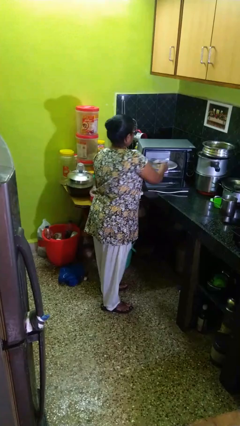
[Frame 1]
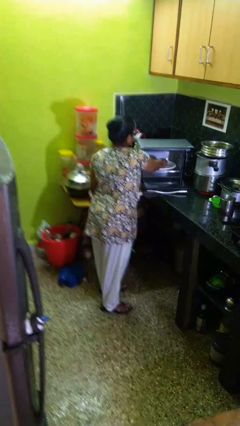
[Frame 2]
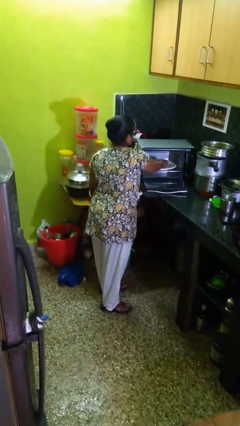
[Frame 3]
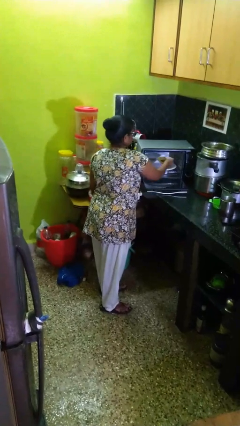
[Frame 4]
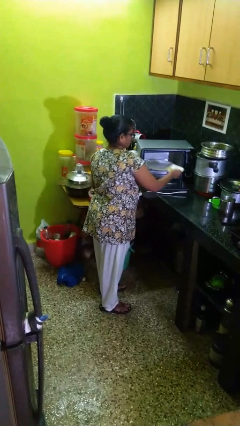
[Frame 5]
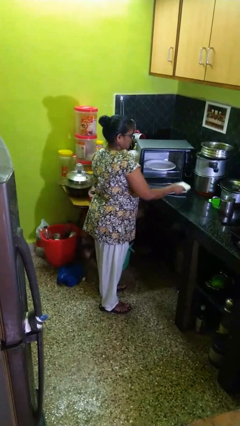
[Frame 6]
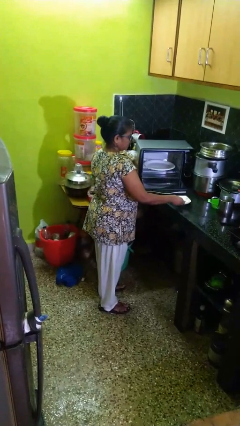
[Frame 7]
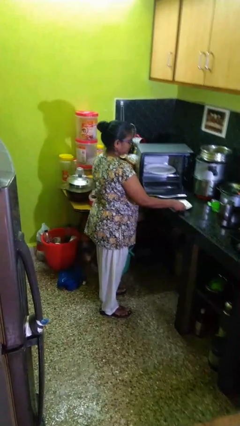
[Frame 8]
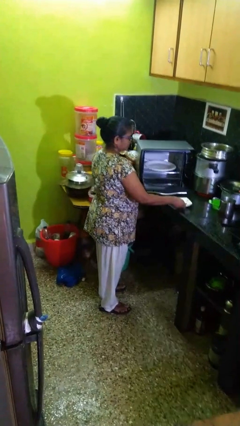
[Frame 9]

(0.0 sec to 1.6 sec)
person takes object from microwave

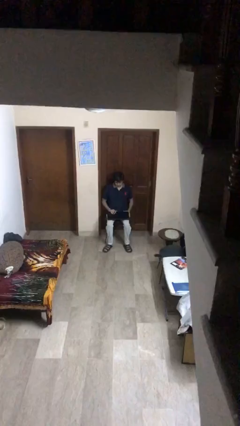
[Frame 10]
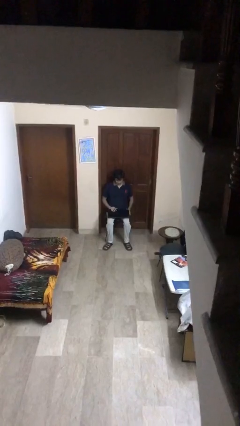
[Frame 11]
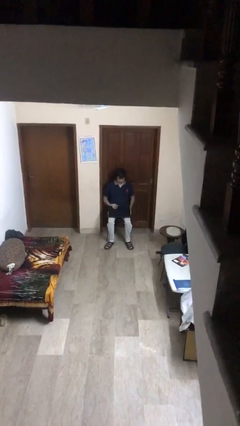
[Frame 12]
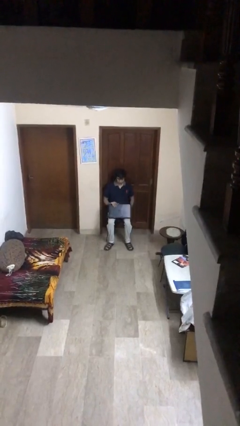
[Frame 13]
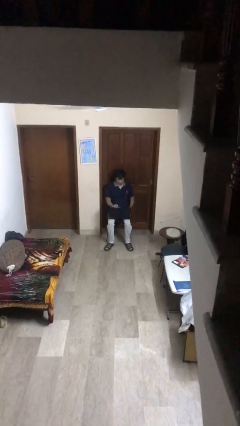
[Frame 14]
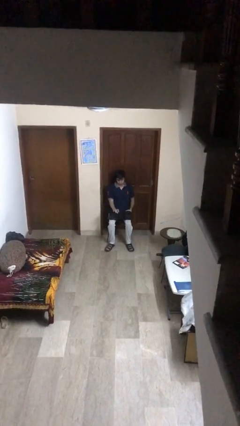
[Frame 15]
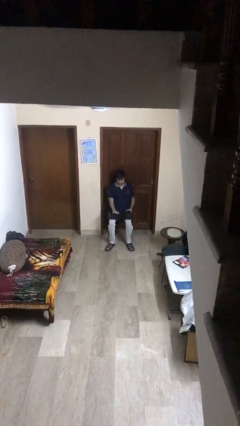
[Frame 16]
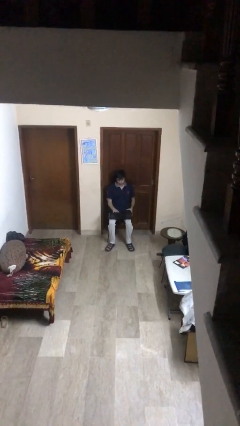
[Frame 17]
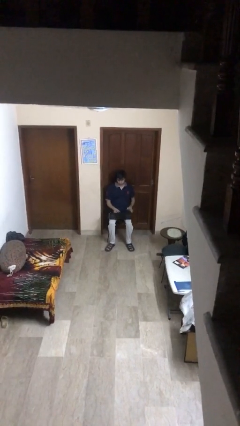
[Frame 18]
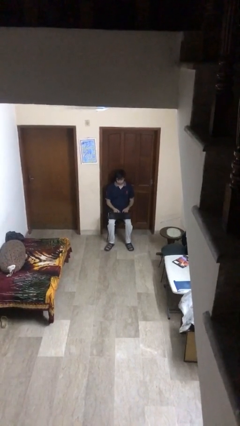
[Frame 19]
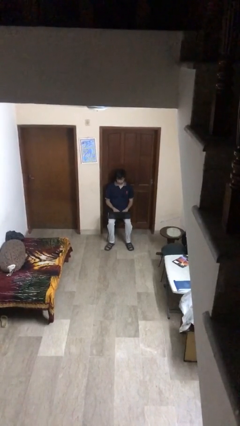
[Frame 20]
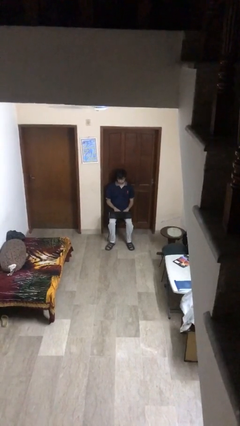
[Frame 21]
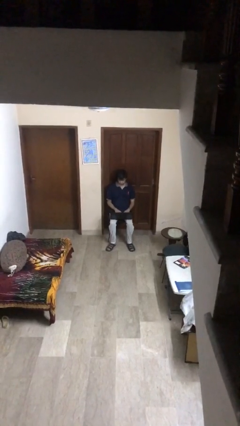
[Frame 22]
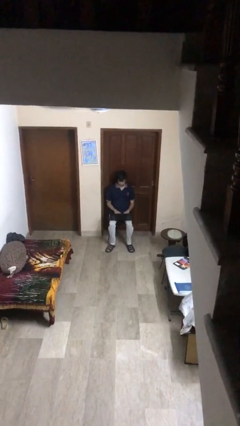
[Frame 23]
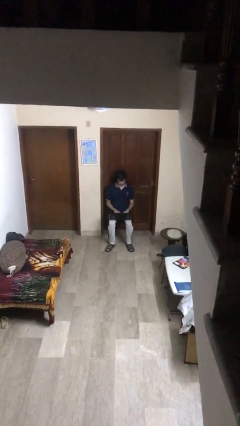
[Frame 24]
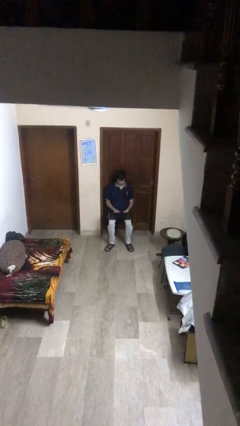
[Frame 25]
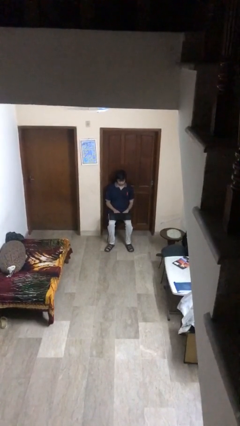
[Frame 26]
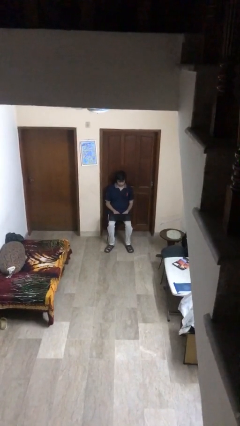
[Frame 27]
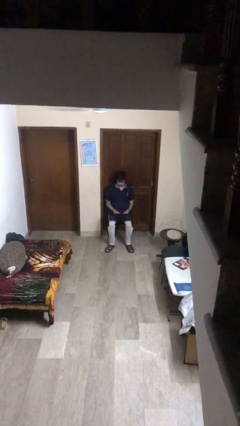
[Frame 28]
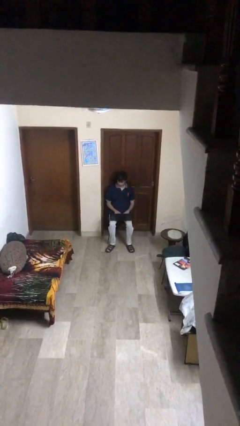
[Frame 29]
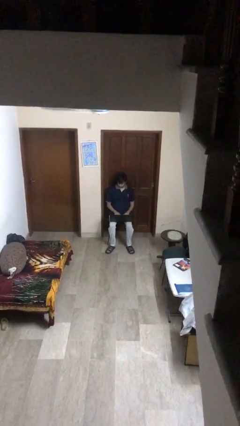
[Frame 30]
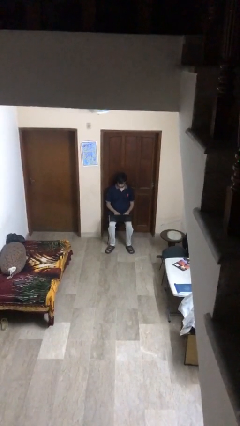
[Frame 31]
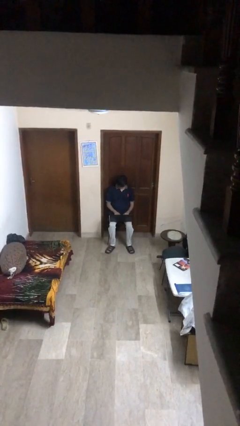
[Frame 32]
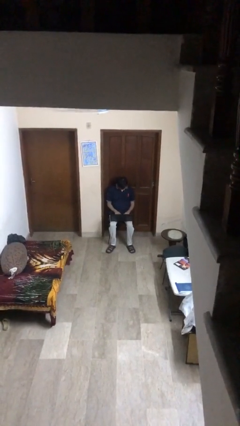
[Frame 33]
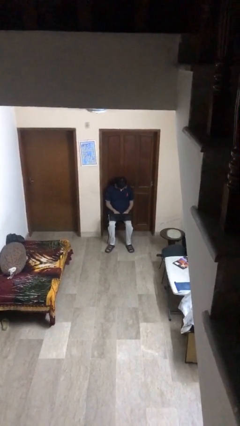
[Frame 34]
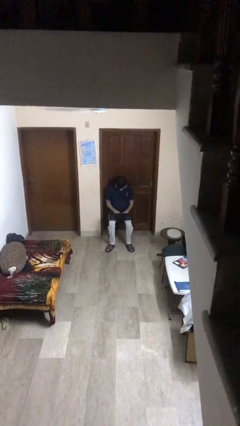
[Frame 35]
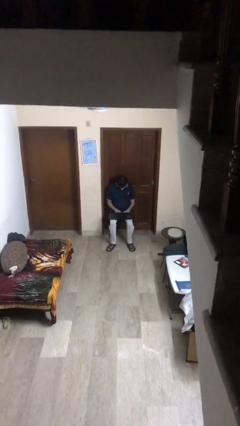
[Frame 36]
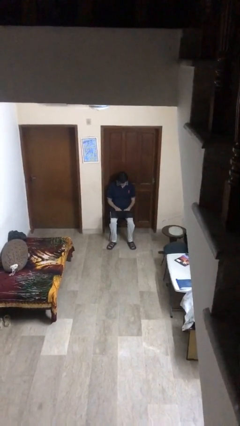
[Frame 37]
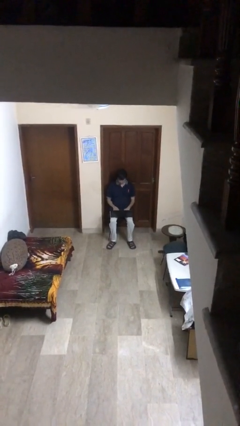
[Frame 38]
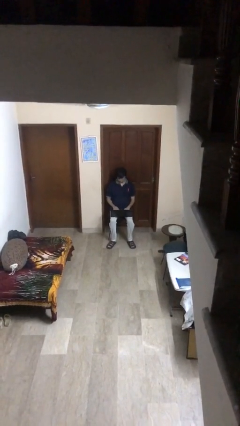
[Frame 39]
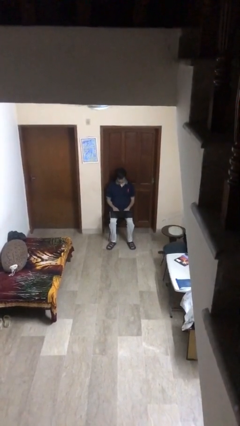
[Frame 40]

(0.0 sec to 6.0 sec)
person interacts with laptop

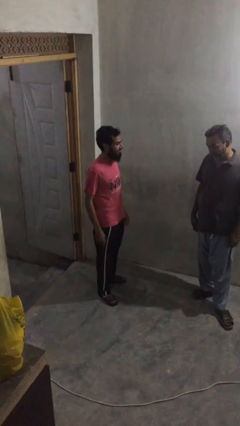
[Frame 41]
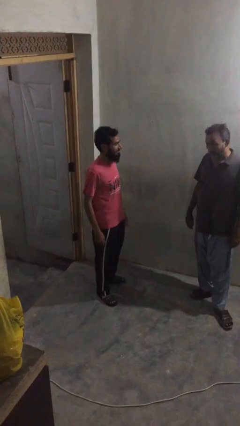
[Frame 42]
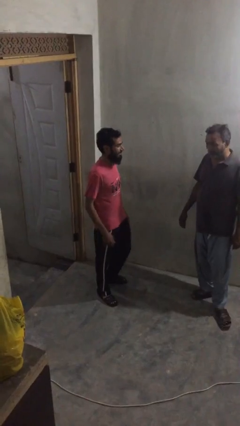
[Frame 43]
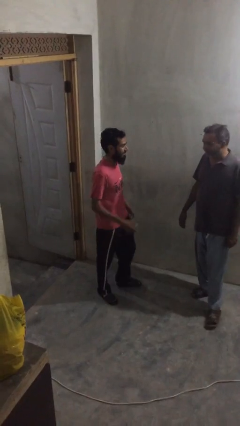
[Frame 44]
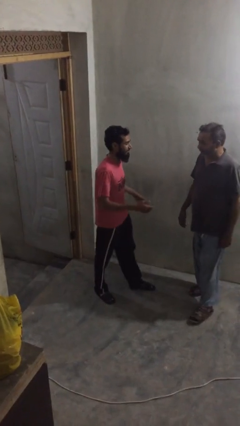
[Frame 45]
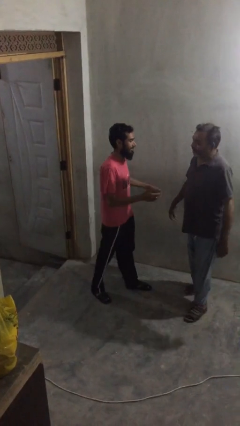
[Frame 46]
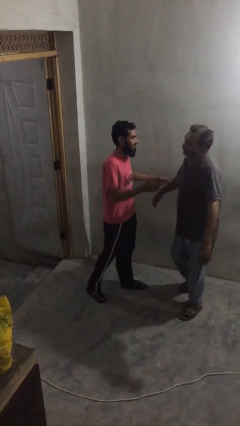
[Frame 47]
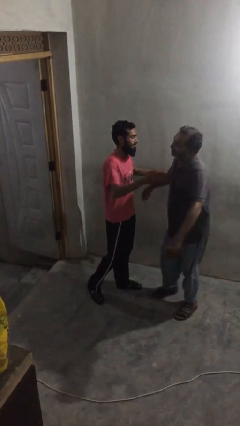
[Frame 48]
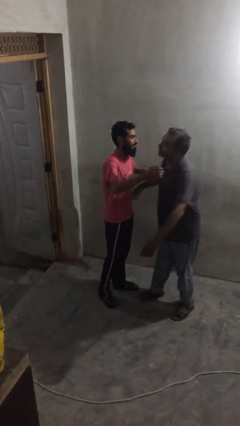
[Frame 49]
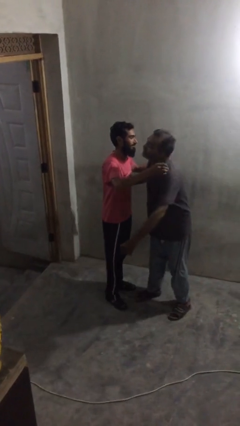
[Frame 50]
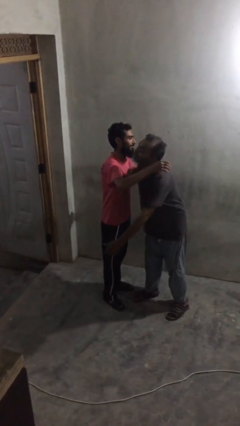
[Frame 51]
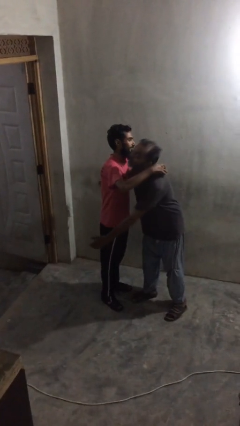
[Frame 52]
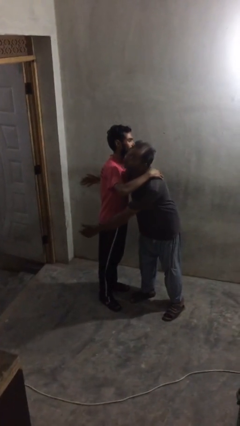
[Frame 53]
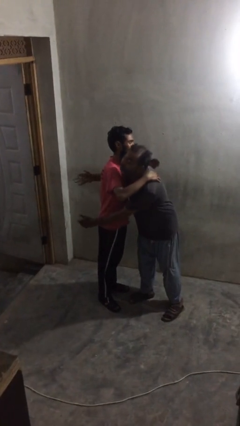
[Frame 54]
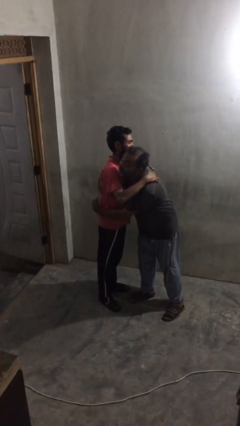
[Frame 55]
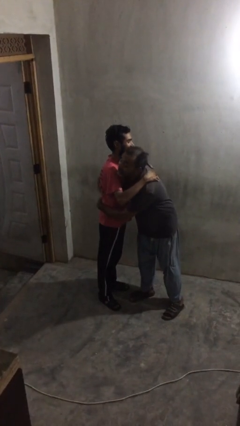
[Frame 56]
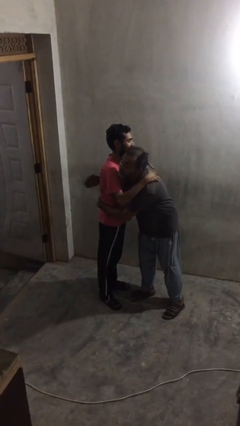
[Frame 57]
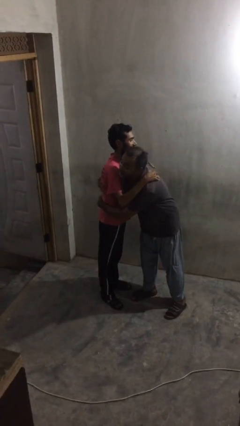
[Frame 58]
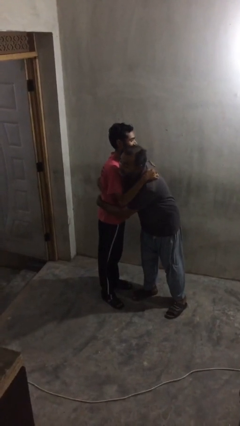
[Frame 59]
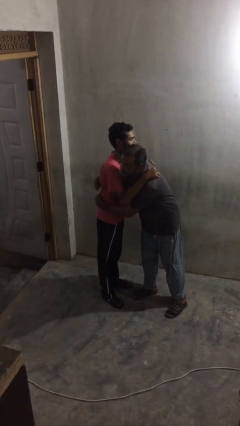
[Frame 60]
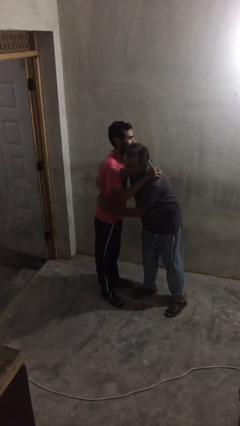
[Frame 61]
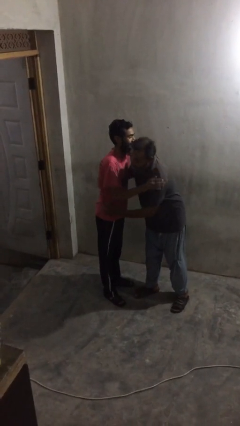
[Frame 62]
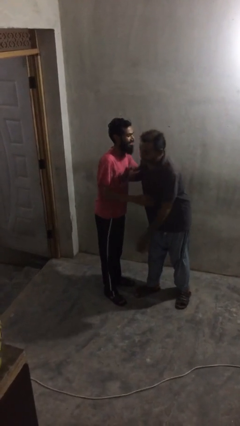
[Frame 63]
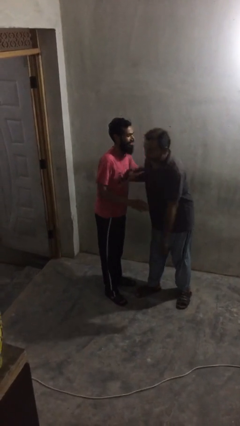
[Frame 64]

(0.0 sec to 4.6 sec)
person embraces person

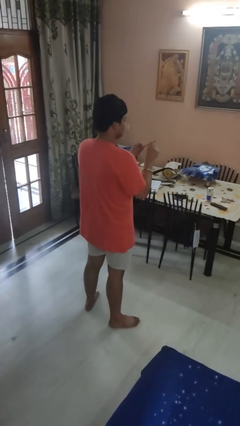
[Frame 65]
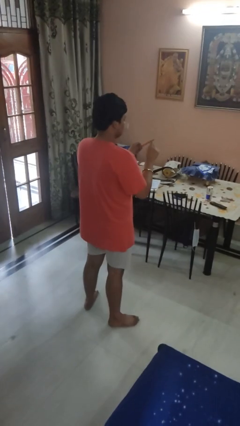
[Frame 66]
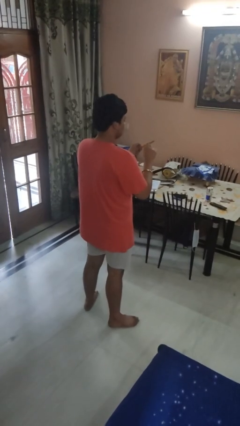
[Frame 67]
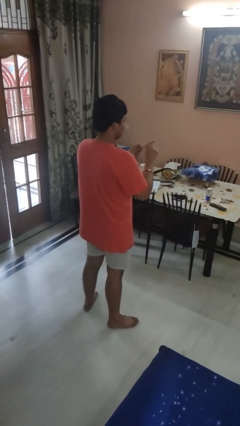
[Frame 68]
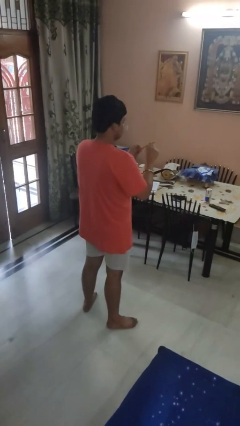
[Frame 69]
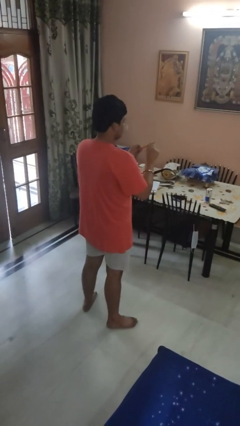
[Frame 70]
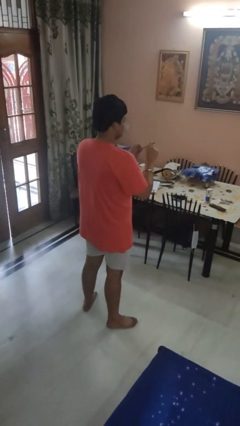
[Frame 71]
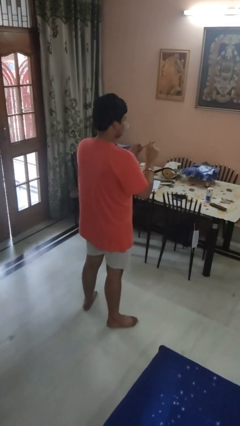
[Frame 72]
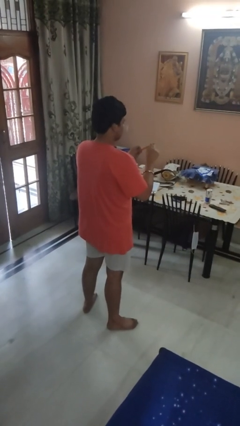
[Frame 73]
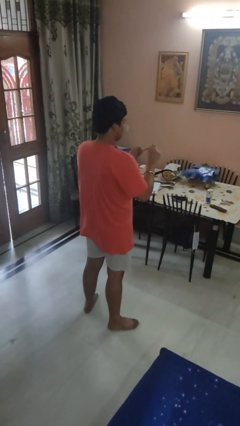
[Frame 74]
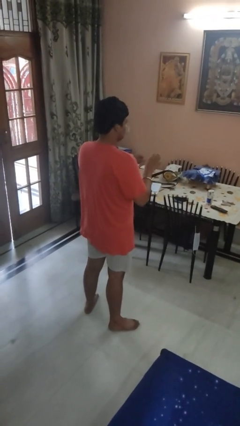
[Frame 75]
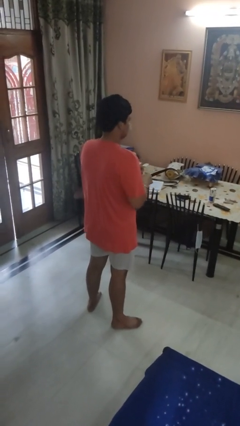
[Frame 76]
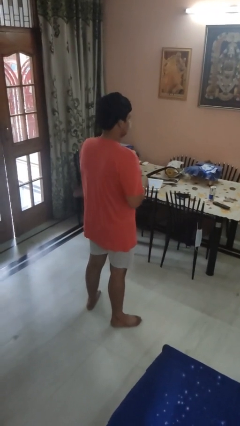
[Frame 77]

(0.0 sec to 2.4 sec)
person files fingernails

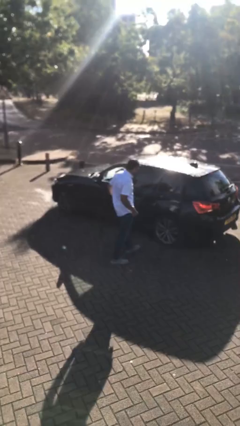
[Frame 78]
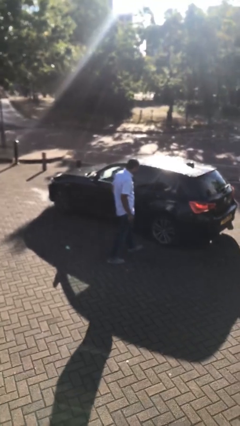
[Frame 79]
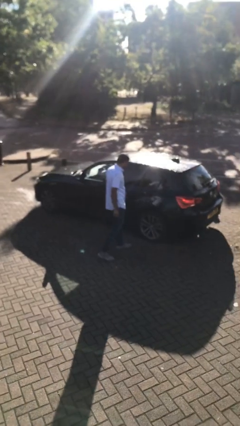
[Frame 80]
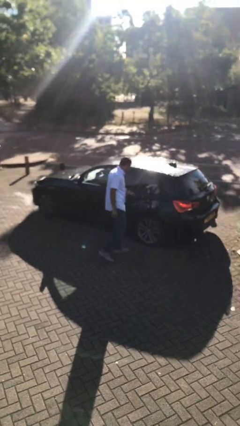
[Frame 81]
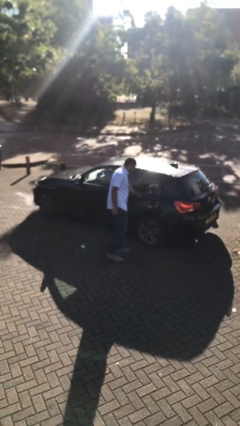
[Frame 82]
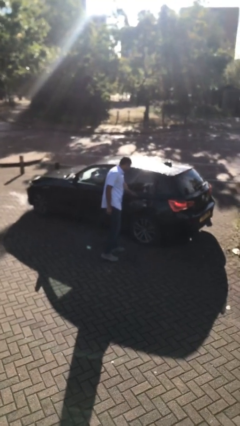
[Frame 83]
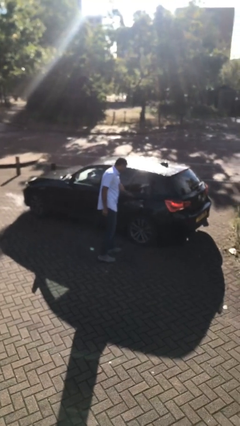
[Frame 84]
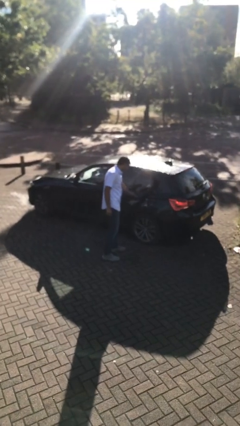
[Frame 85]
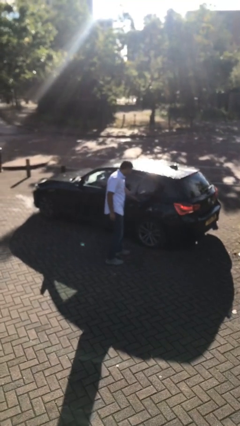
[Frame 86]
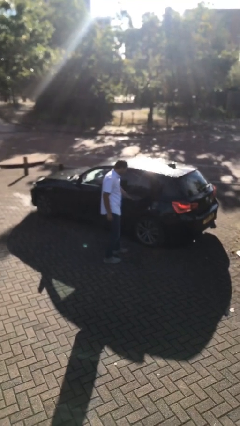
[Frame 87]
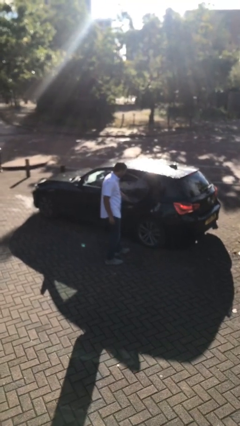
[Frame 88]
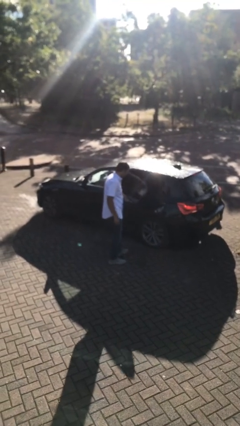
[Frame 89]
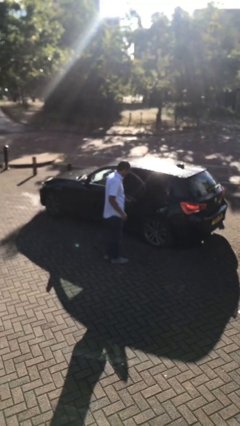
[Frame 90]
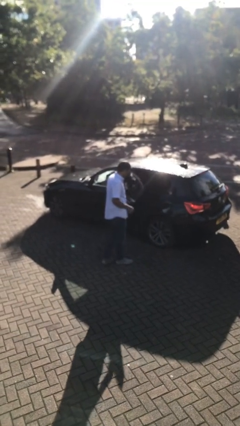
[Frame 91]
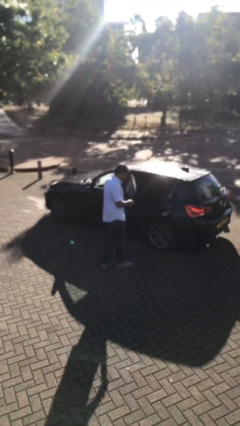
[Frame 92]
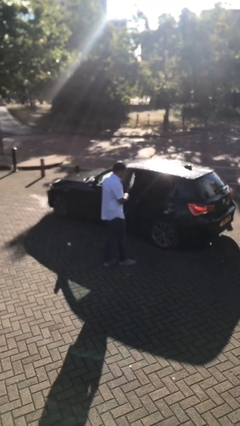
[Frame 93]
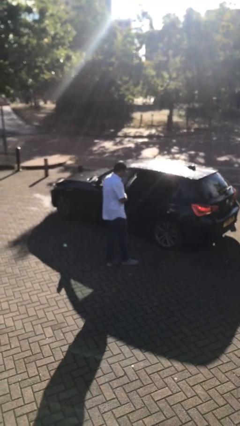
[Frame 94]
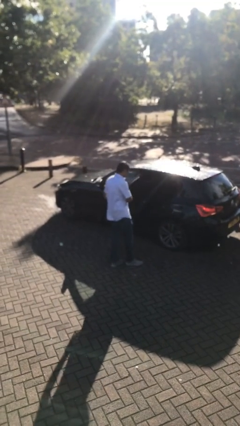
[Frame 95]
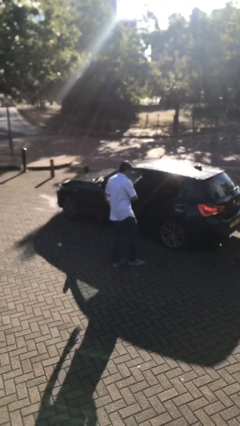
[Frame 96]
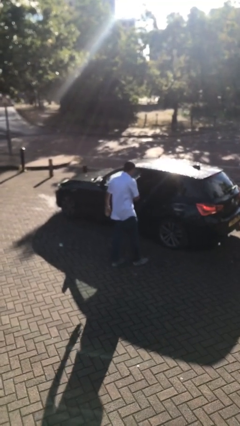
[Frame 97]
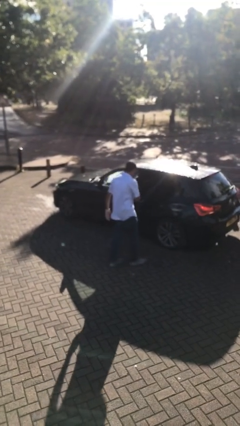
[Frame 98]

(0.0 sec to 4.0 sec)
person opens car door
